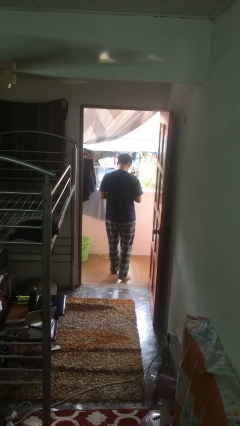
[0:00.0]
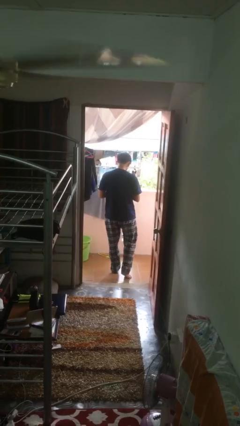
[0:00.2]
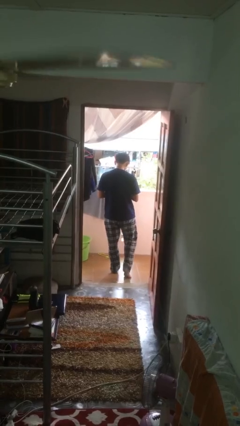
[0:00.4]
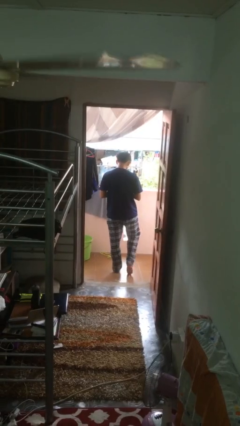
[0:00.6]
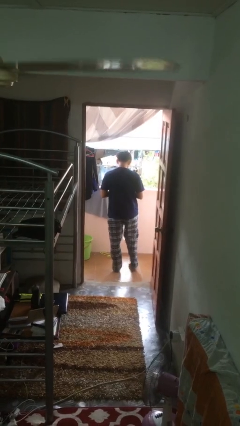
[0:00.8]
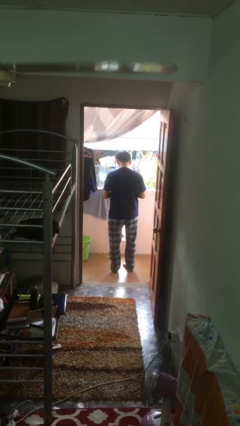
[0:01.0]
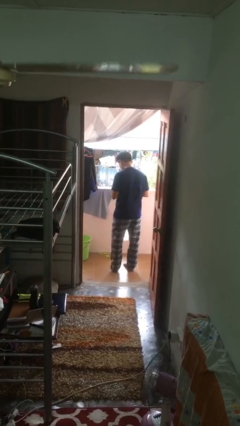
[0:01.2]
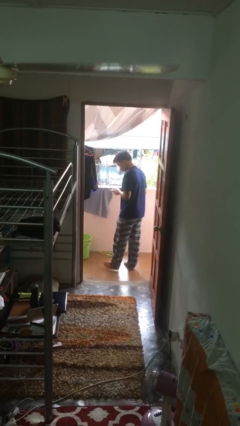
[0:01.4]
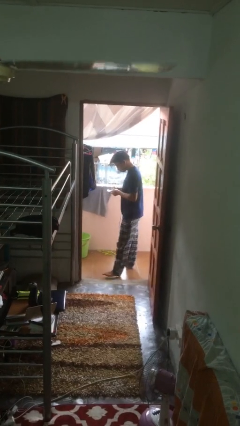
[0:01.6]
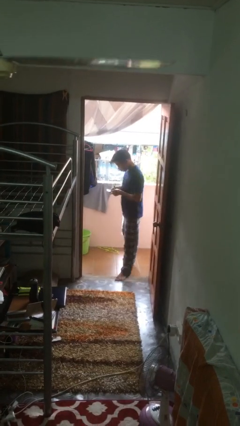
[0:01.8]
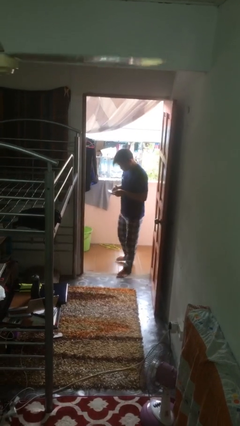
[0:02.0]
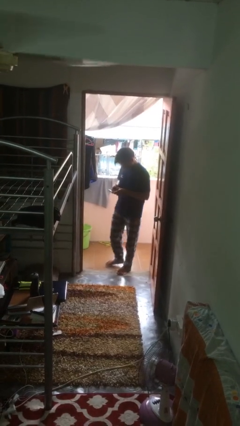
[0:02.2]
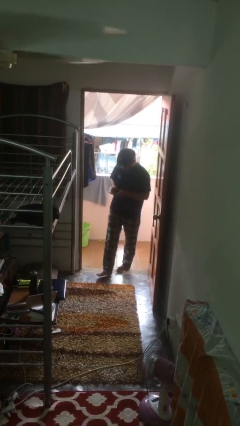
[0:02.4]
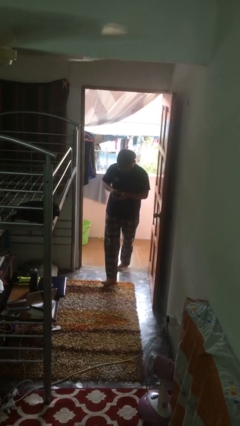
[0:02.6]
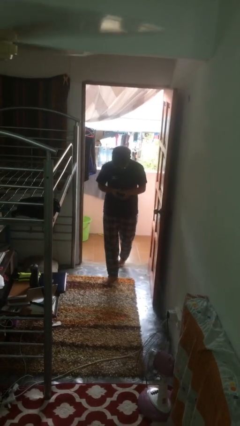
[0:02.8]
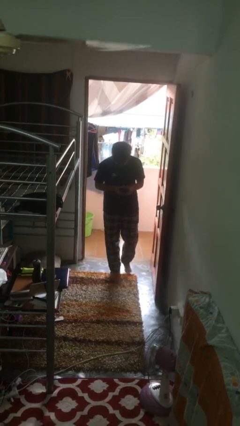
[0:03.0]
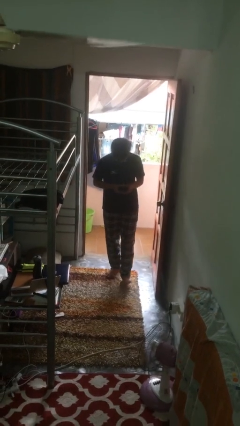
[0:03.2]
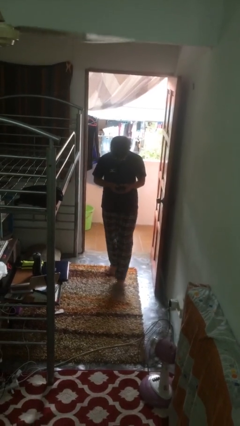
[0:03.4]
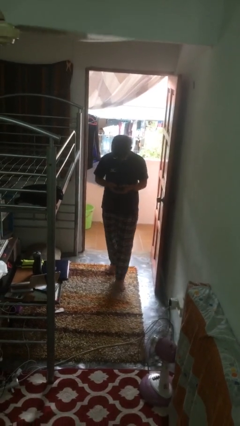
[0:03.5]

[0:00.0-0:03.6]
person enters scene through structure

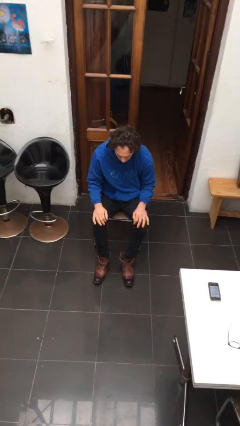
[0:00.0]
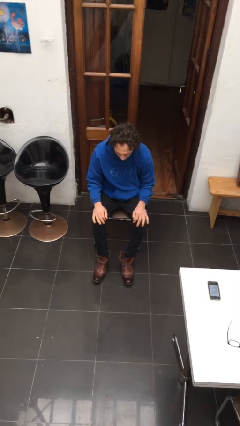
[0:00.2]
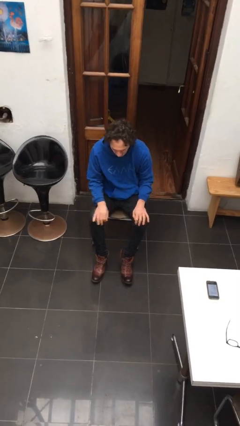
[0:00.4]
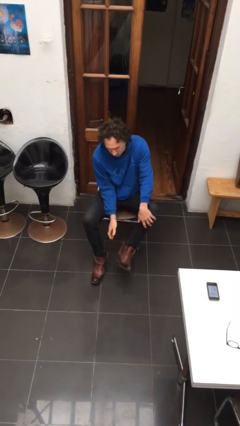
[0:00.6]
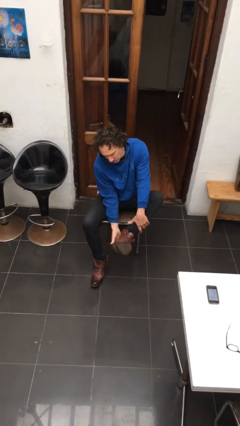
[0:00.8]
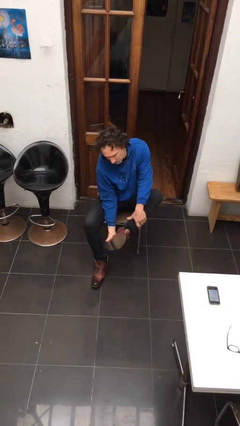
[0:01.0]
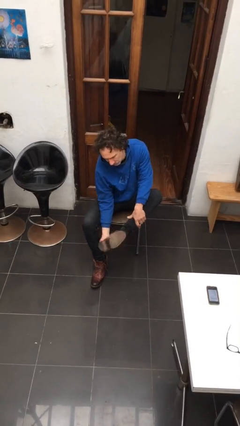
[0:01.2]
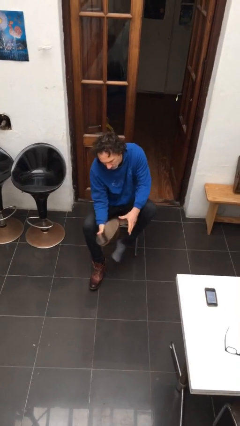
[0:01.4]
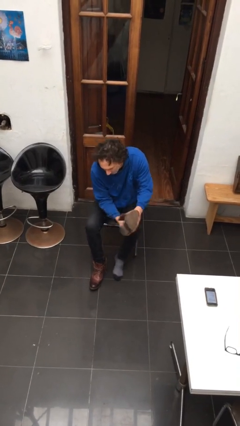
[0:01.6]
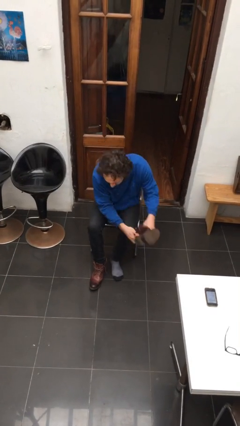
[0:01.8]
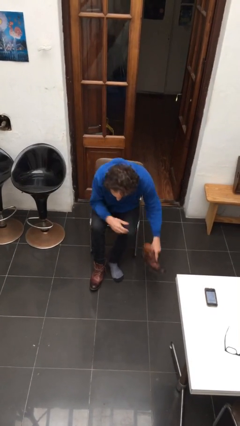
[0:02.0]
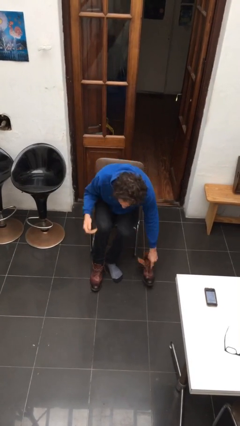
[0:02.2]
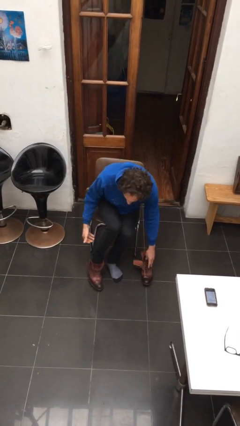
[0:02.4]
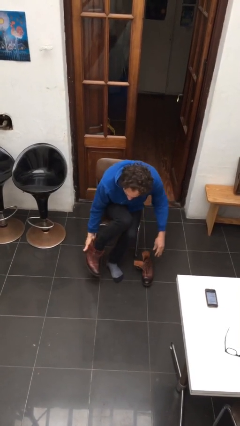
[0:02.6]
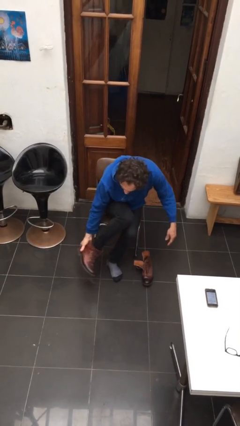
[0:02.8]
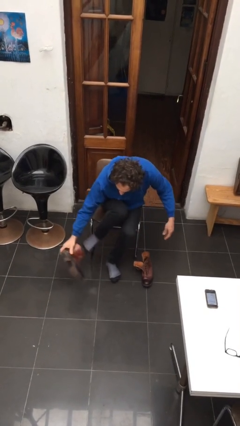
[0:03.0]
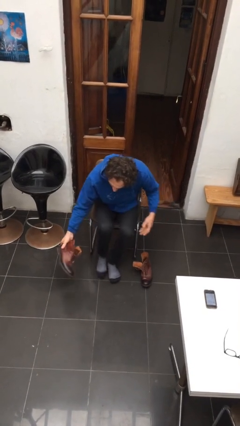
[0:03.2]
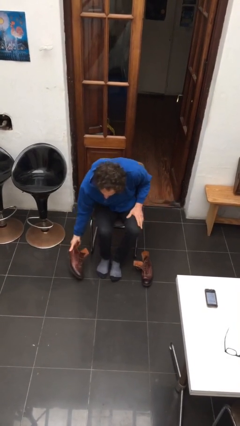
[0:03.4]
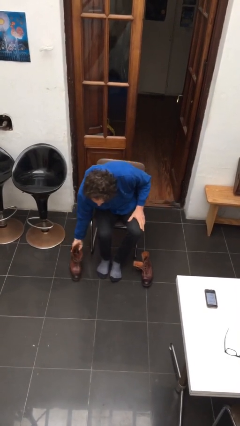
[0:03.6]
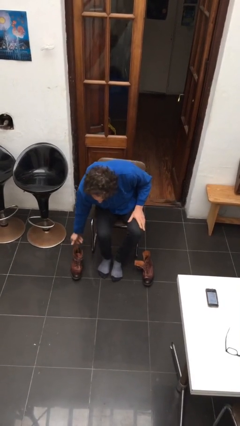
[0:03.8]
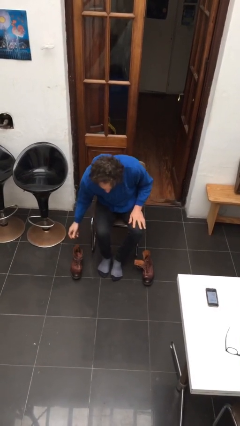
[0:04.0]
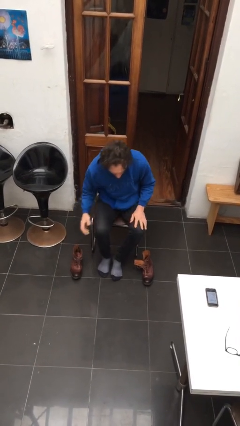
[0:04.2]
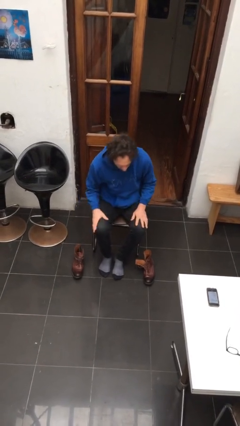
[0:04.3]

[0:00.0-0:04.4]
person takes off boots

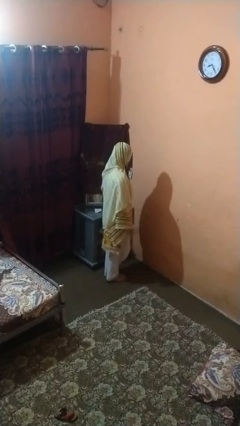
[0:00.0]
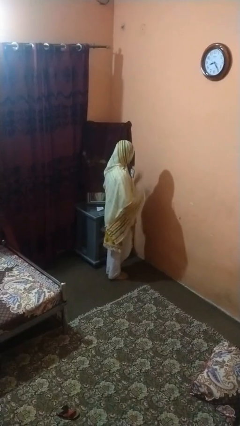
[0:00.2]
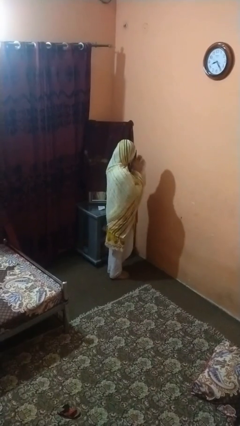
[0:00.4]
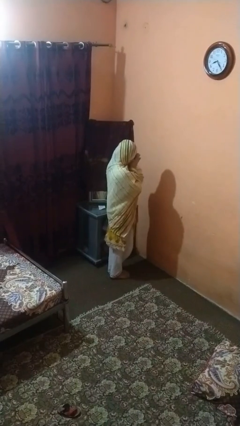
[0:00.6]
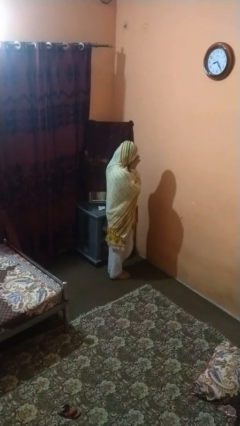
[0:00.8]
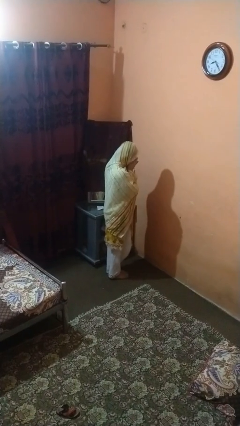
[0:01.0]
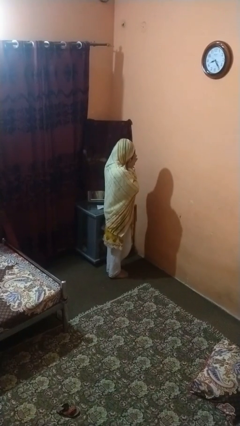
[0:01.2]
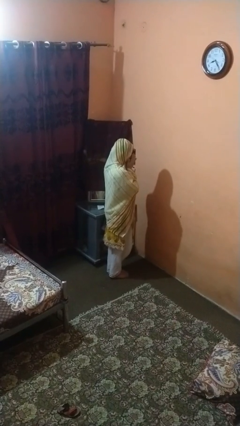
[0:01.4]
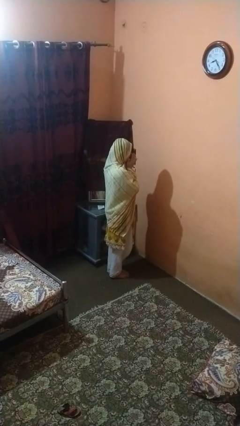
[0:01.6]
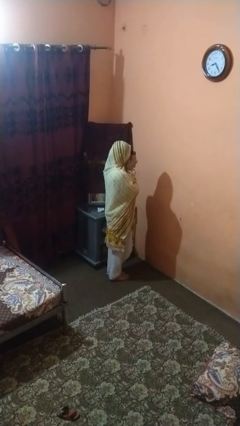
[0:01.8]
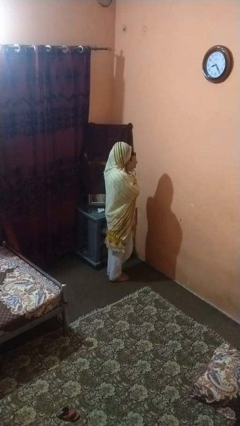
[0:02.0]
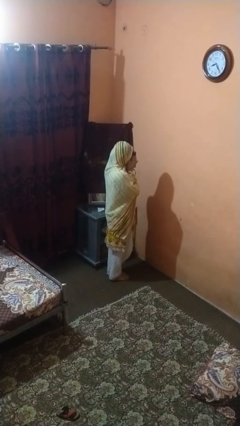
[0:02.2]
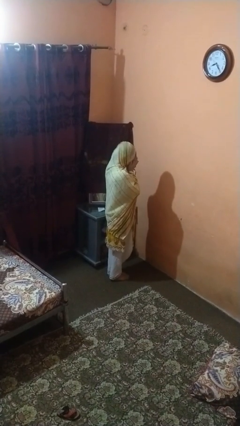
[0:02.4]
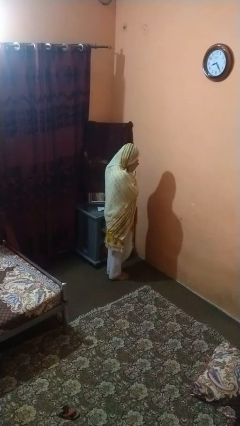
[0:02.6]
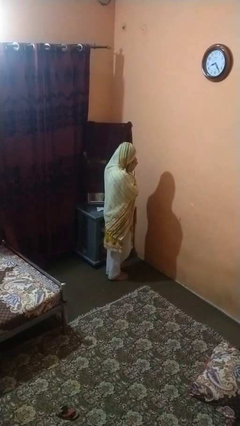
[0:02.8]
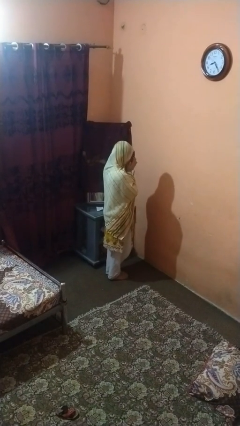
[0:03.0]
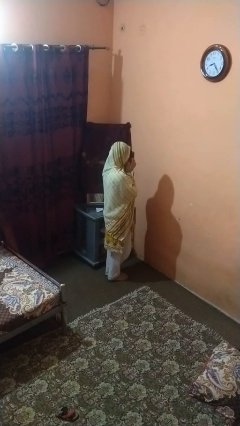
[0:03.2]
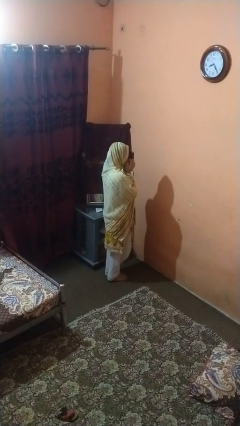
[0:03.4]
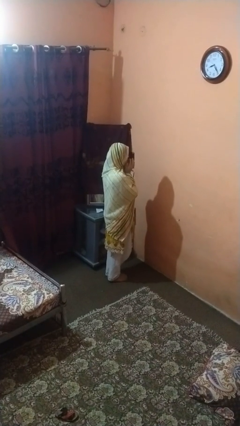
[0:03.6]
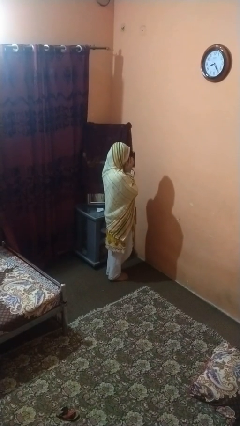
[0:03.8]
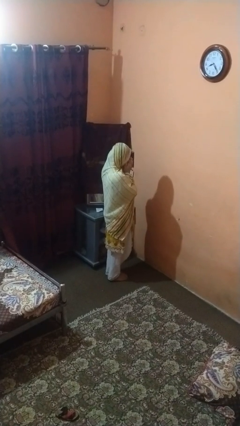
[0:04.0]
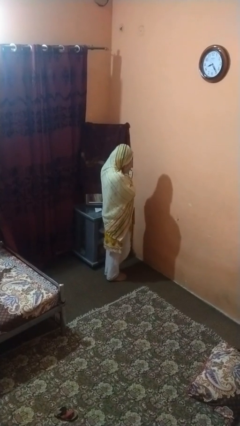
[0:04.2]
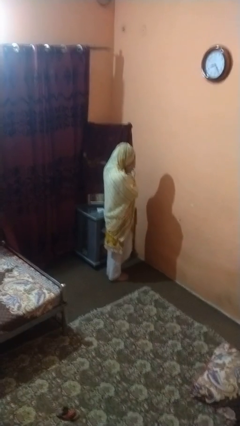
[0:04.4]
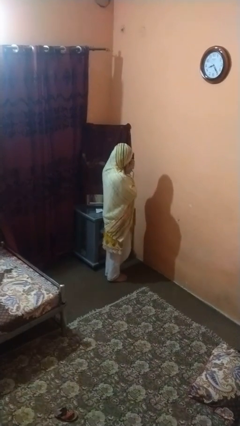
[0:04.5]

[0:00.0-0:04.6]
person sneezes into hand

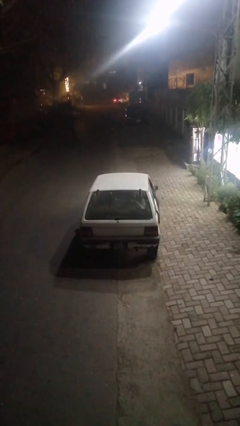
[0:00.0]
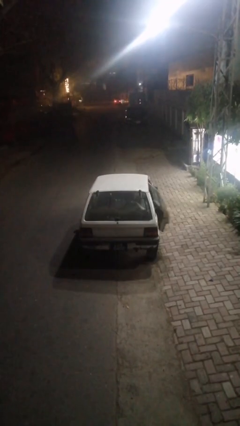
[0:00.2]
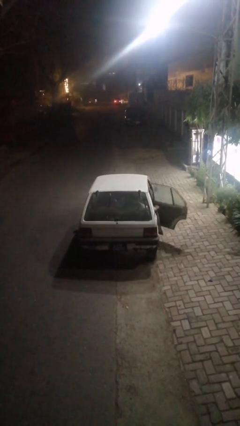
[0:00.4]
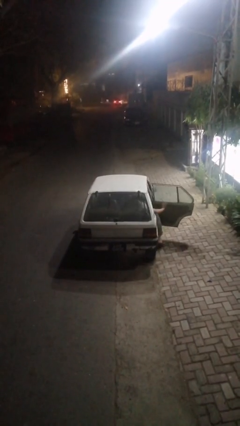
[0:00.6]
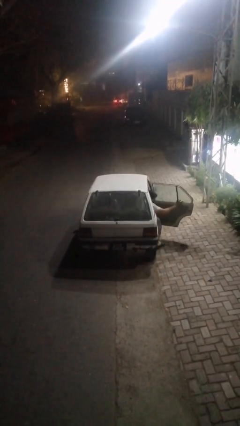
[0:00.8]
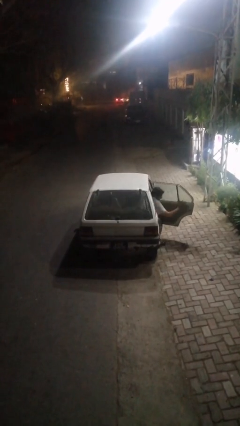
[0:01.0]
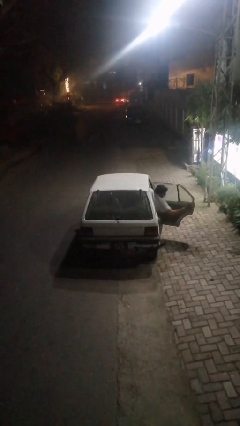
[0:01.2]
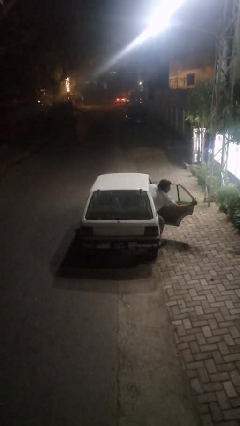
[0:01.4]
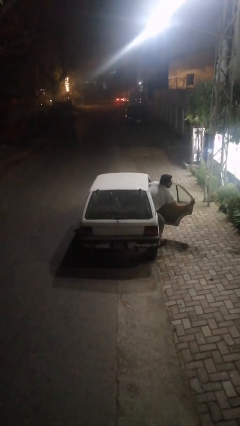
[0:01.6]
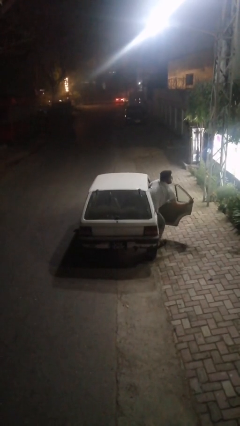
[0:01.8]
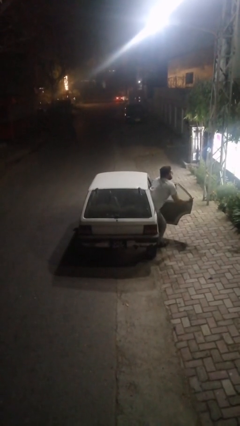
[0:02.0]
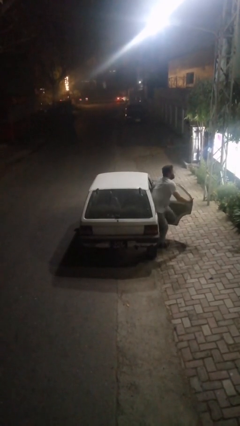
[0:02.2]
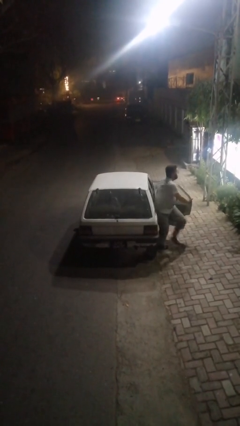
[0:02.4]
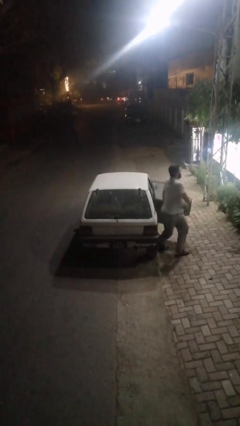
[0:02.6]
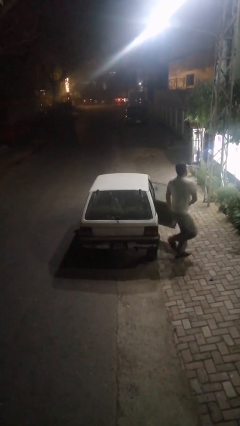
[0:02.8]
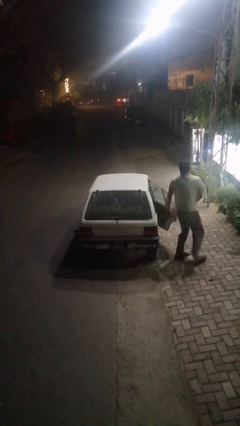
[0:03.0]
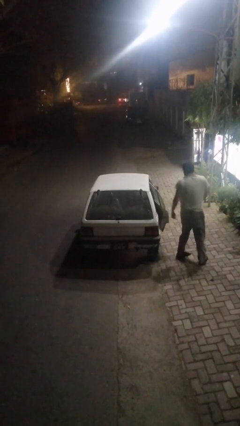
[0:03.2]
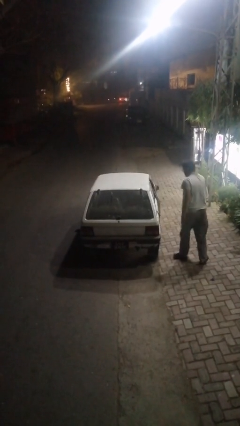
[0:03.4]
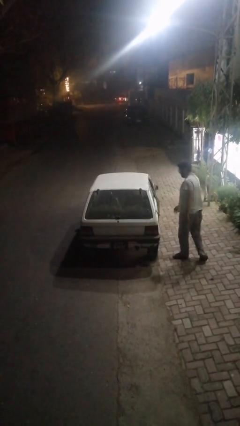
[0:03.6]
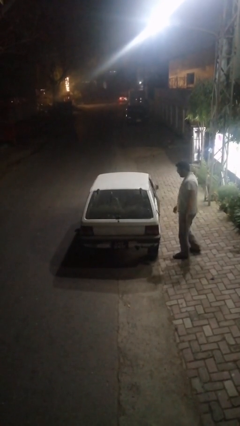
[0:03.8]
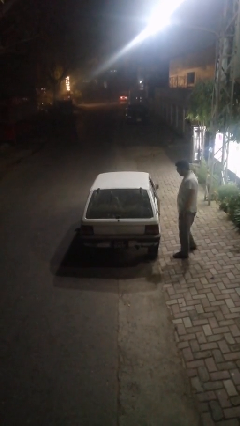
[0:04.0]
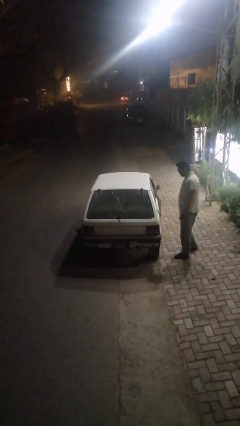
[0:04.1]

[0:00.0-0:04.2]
car drops off person

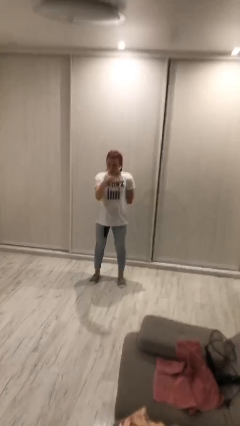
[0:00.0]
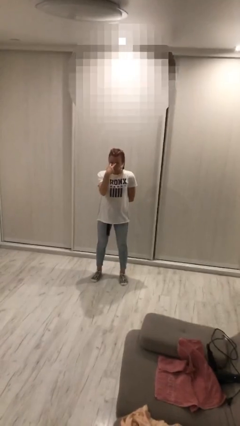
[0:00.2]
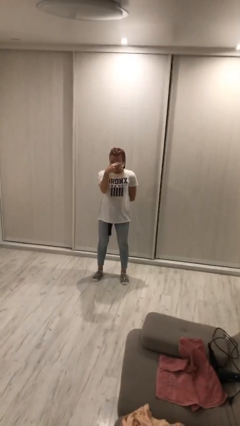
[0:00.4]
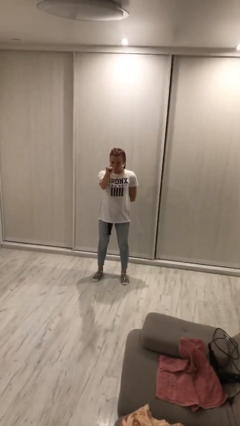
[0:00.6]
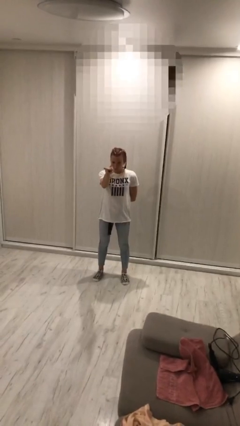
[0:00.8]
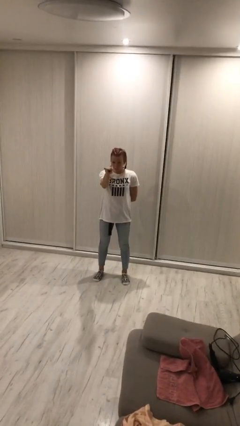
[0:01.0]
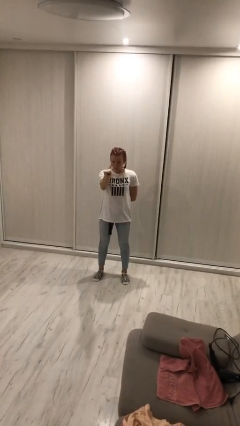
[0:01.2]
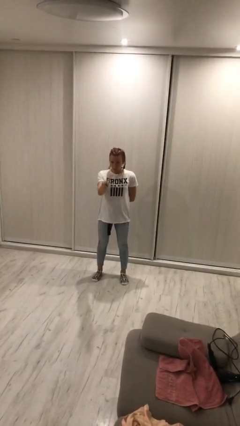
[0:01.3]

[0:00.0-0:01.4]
person gestures watch closely
